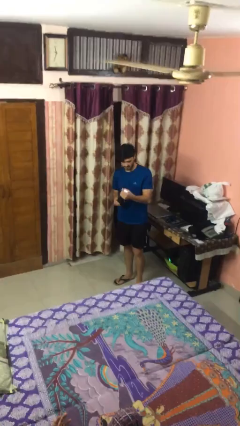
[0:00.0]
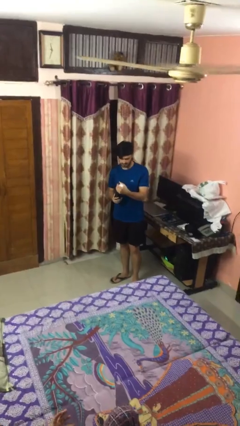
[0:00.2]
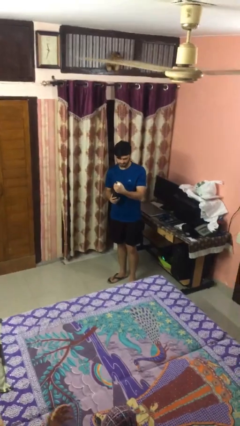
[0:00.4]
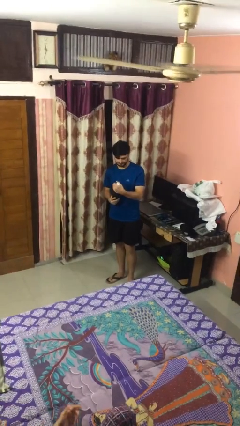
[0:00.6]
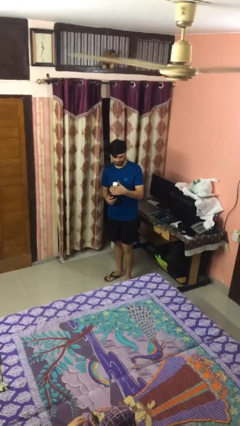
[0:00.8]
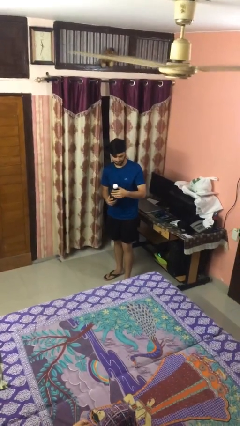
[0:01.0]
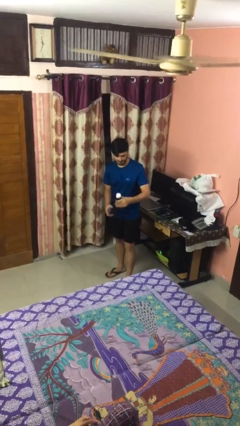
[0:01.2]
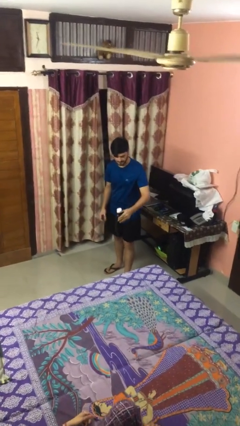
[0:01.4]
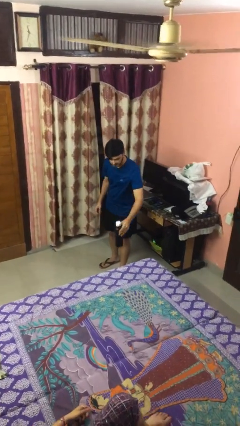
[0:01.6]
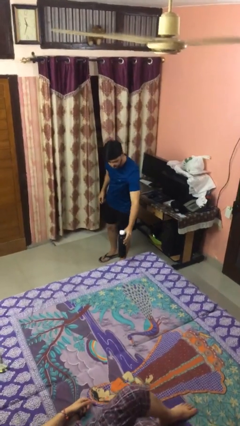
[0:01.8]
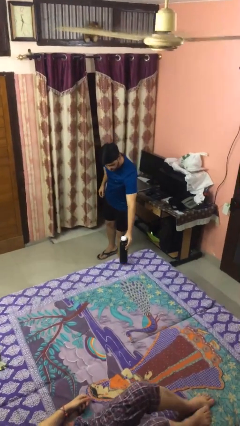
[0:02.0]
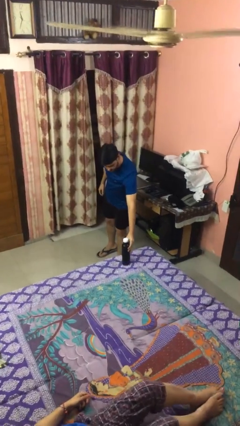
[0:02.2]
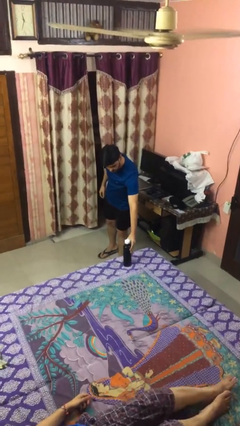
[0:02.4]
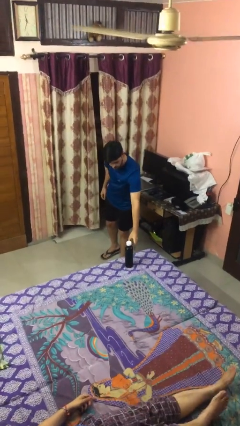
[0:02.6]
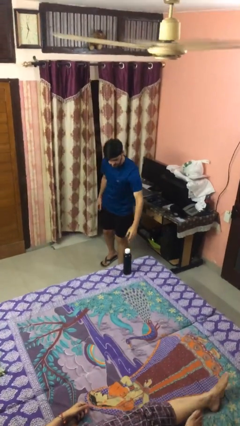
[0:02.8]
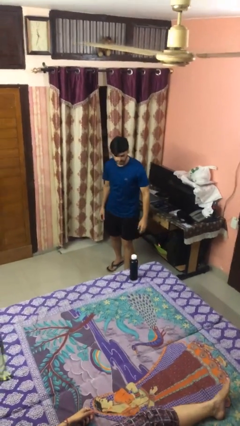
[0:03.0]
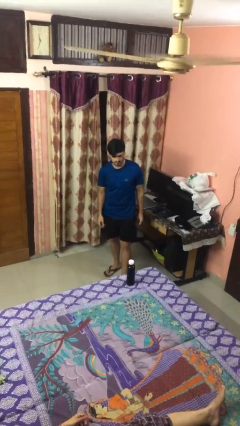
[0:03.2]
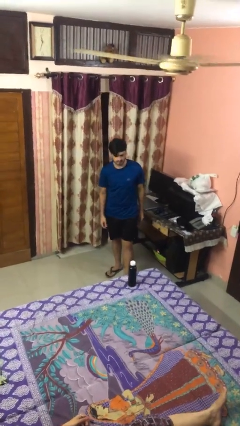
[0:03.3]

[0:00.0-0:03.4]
person puts down object on bed

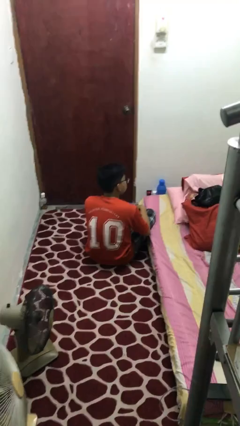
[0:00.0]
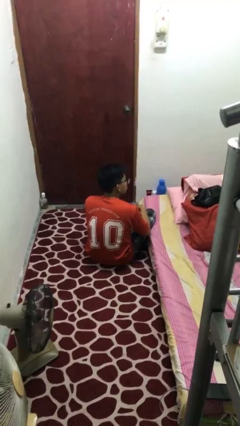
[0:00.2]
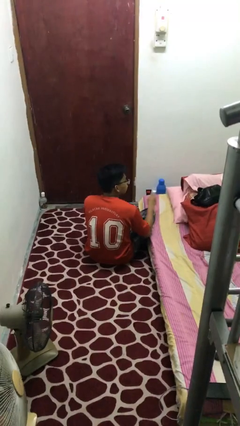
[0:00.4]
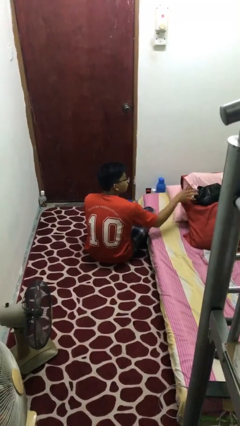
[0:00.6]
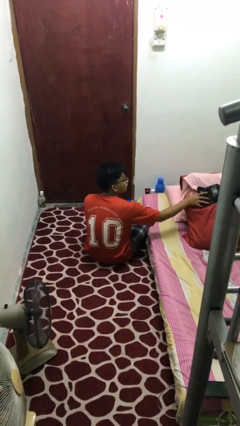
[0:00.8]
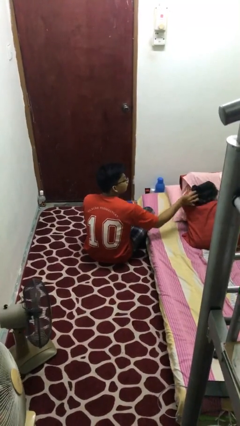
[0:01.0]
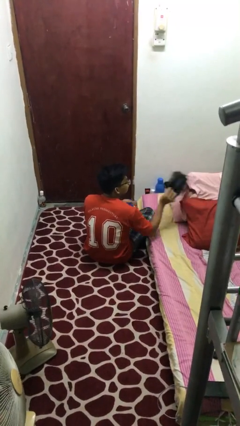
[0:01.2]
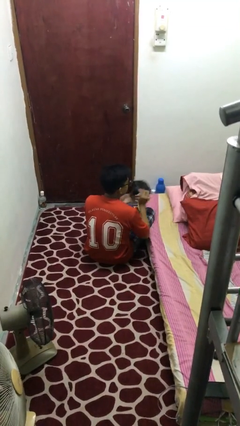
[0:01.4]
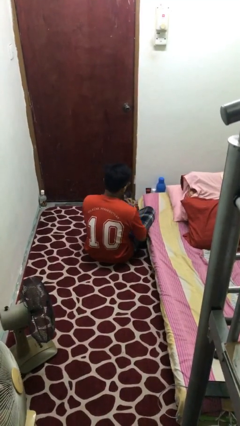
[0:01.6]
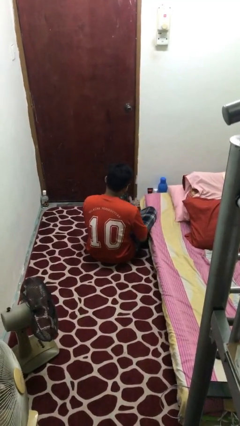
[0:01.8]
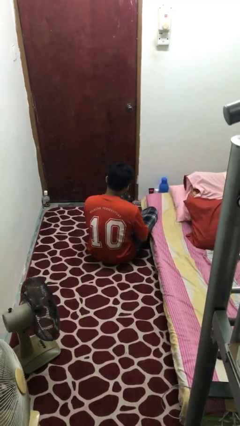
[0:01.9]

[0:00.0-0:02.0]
person picks up object from bed

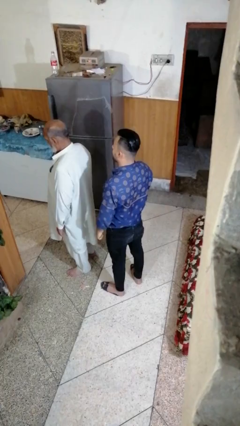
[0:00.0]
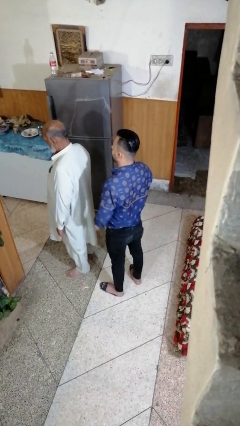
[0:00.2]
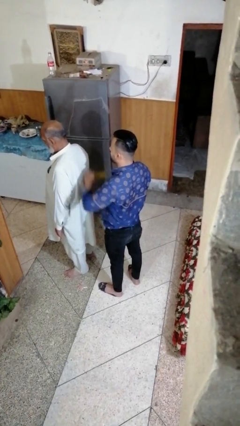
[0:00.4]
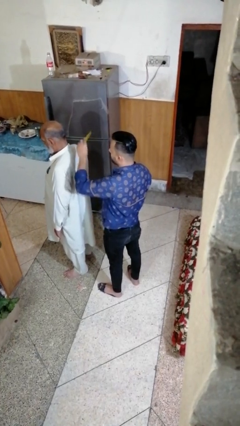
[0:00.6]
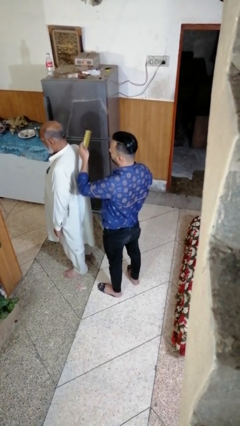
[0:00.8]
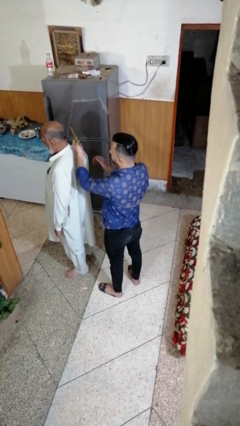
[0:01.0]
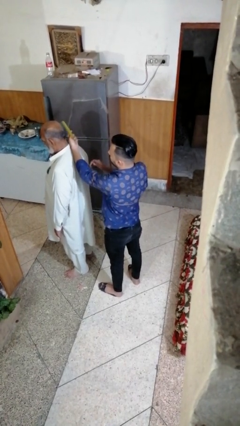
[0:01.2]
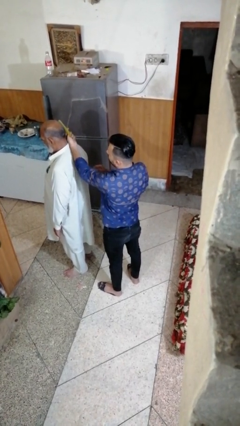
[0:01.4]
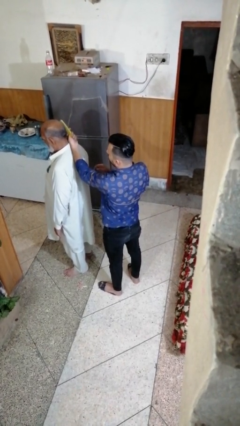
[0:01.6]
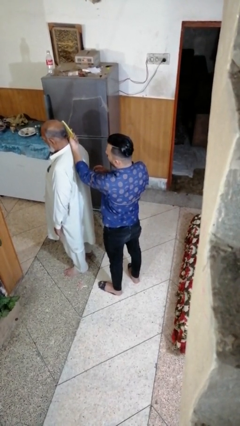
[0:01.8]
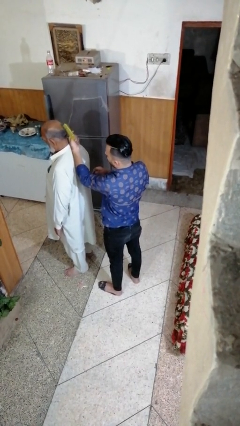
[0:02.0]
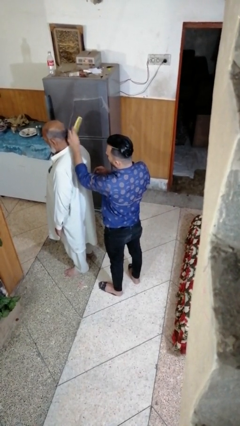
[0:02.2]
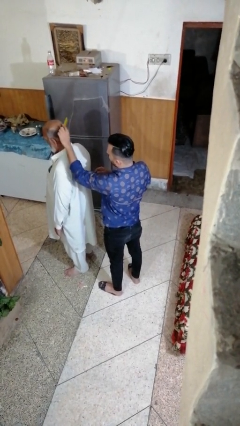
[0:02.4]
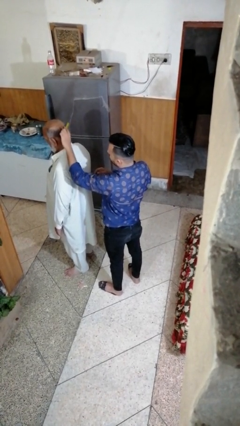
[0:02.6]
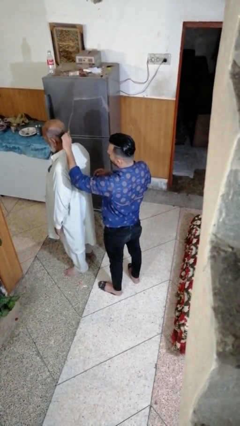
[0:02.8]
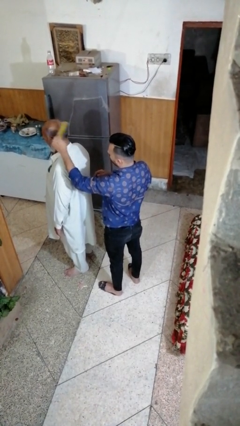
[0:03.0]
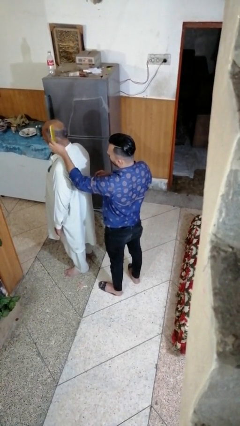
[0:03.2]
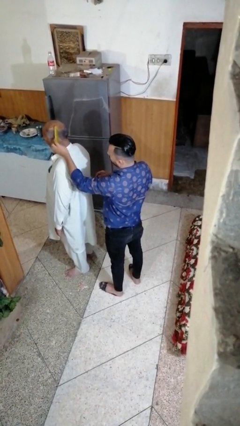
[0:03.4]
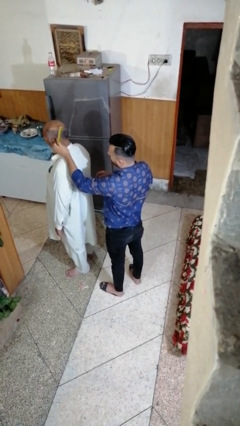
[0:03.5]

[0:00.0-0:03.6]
person brushes hair of person

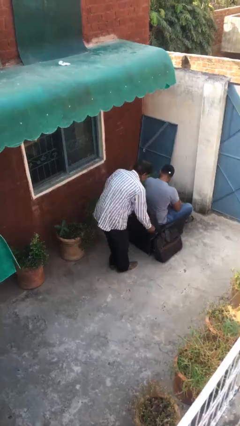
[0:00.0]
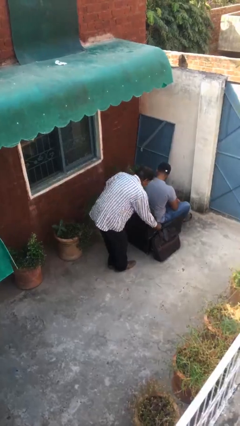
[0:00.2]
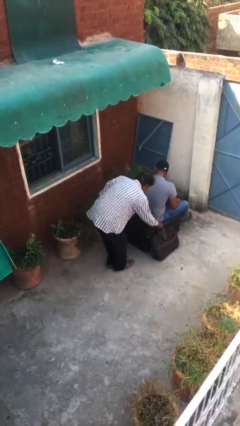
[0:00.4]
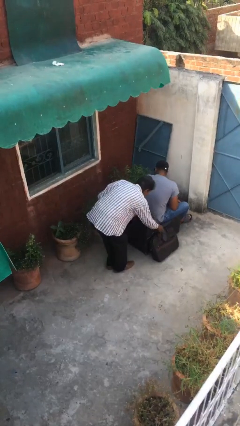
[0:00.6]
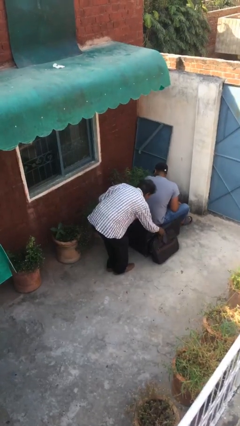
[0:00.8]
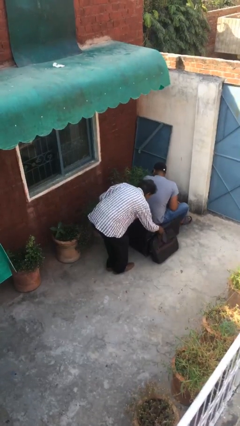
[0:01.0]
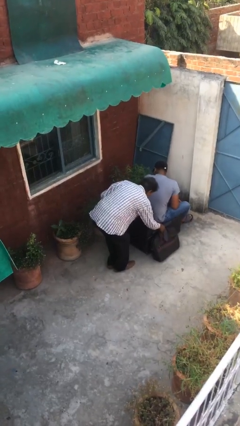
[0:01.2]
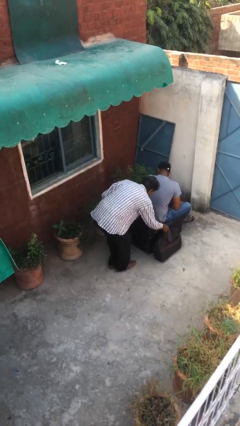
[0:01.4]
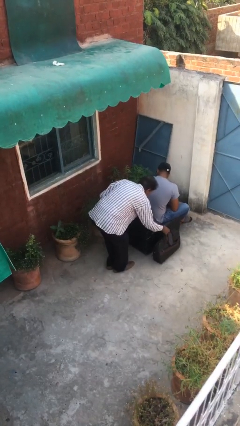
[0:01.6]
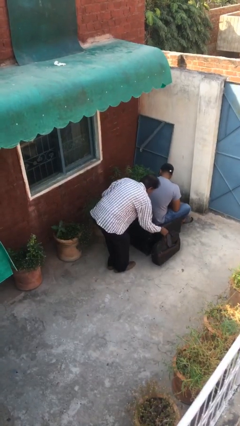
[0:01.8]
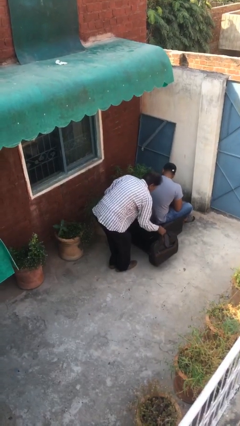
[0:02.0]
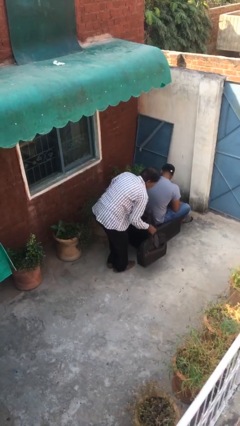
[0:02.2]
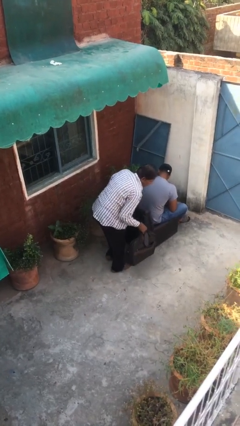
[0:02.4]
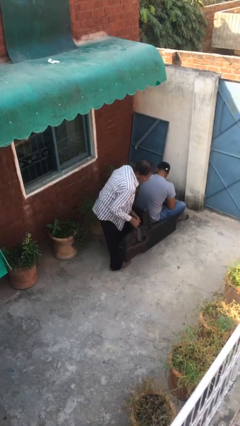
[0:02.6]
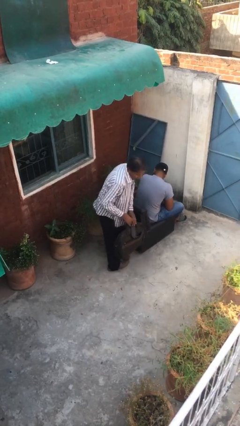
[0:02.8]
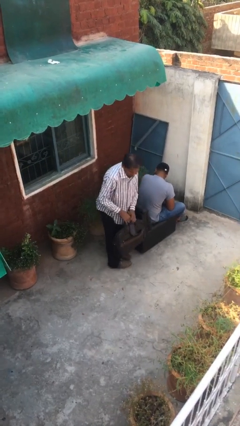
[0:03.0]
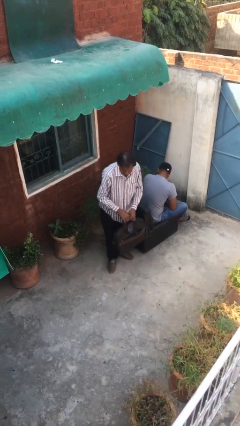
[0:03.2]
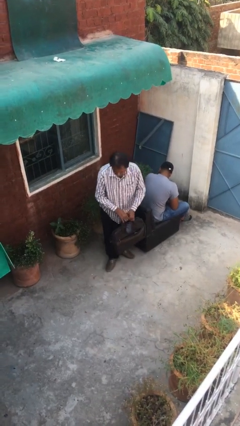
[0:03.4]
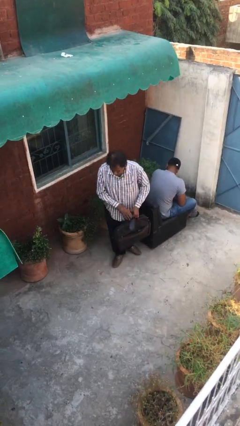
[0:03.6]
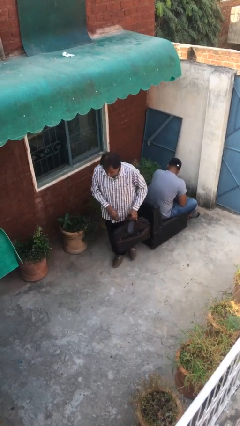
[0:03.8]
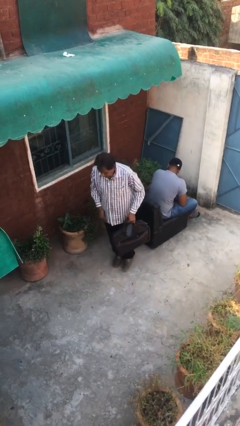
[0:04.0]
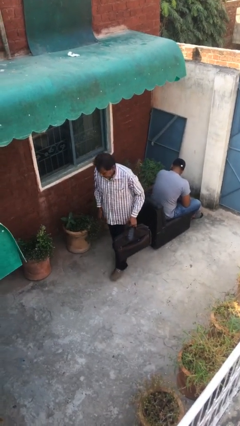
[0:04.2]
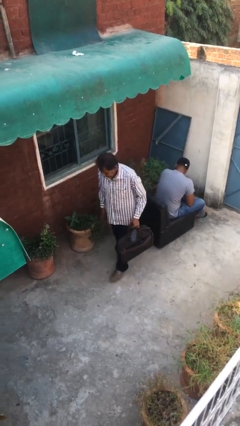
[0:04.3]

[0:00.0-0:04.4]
person steals object from person

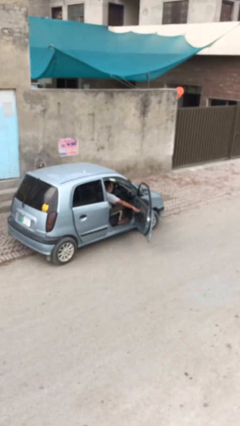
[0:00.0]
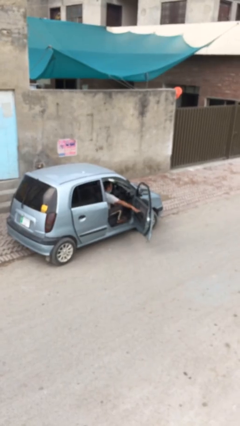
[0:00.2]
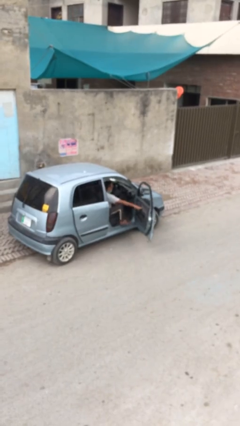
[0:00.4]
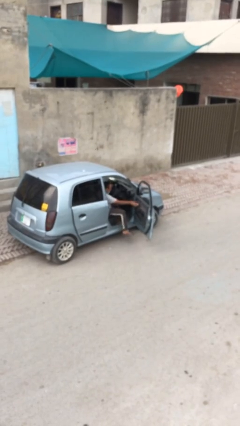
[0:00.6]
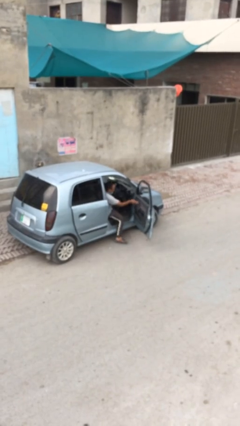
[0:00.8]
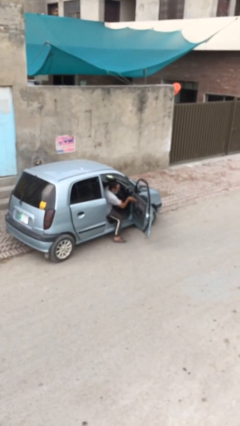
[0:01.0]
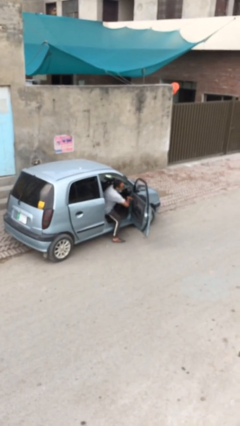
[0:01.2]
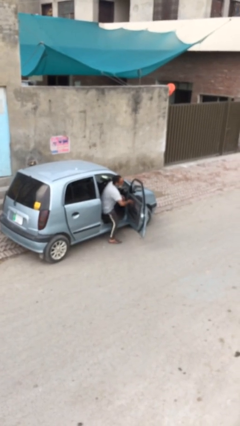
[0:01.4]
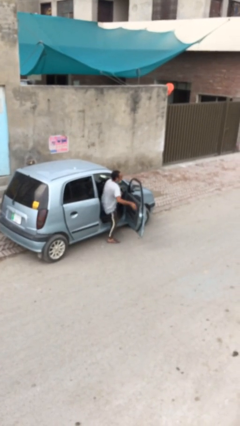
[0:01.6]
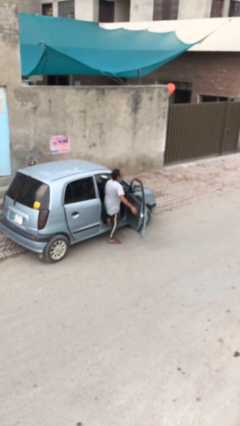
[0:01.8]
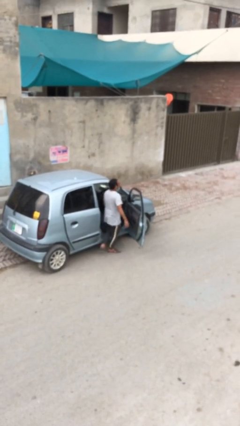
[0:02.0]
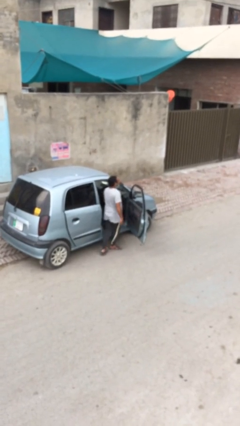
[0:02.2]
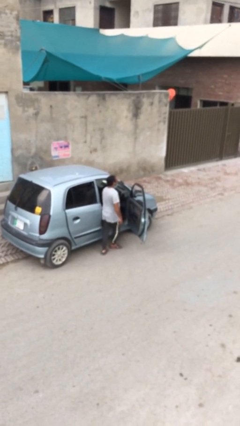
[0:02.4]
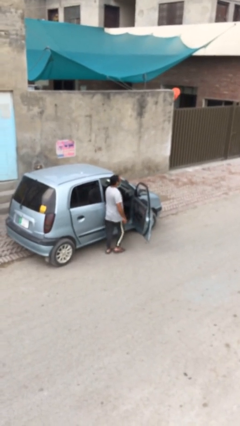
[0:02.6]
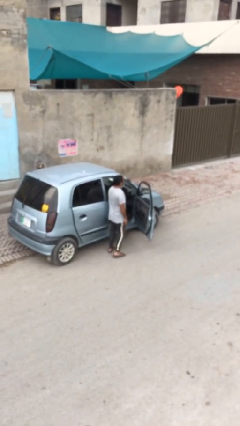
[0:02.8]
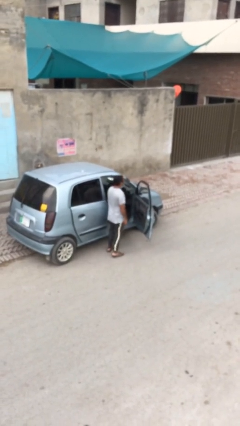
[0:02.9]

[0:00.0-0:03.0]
person exits car

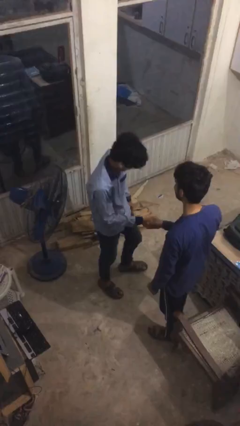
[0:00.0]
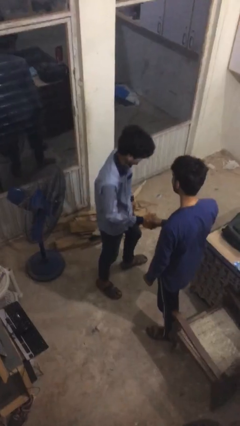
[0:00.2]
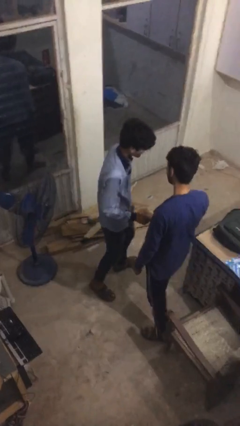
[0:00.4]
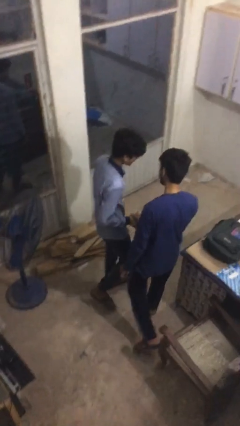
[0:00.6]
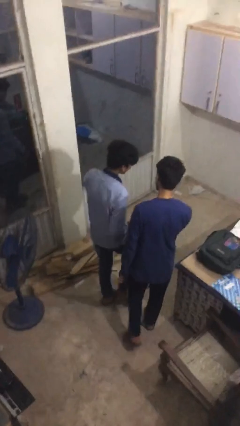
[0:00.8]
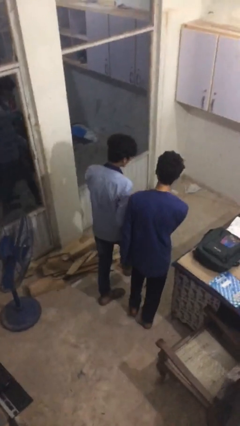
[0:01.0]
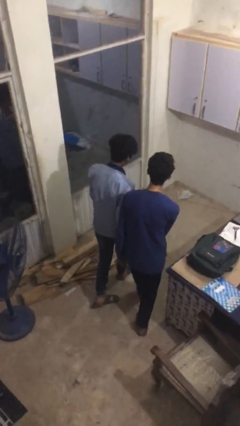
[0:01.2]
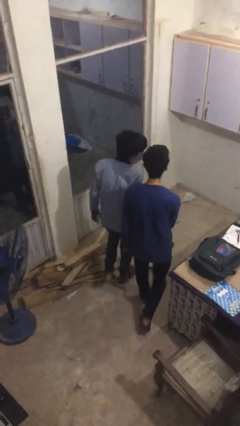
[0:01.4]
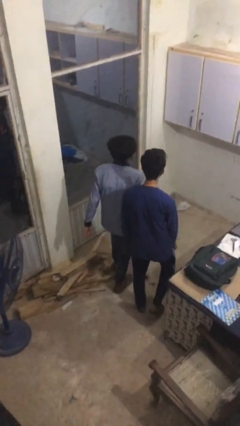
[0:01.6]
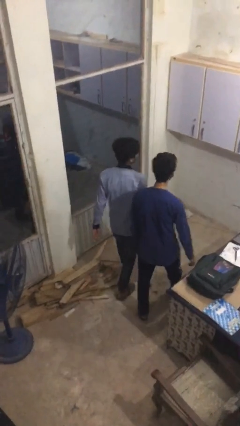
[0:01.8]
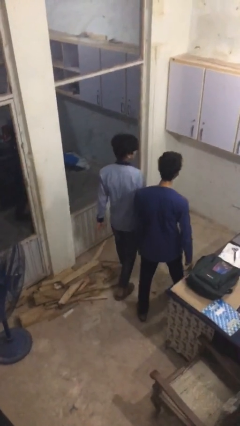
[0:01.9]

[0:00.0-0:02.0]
person talks to person
